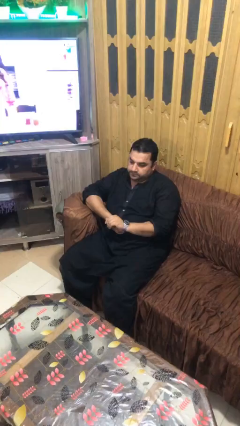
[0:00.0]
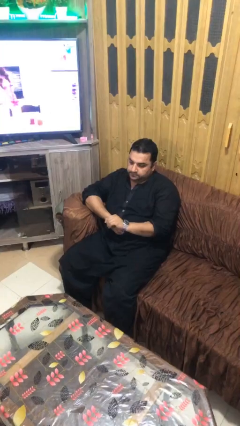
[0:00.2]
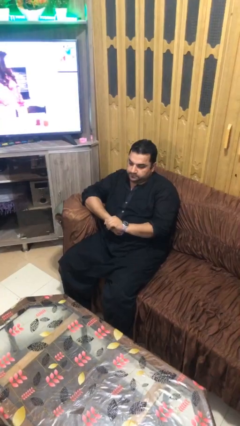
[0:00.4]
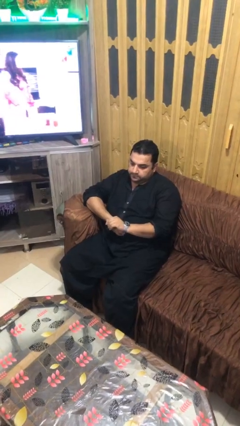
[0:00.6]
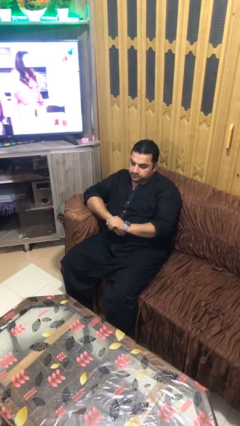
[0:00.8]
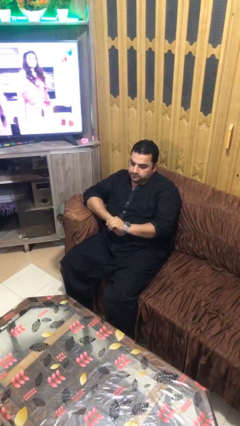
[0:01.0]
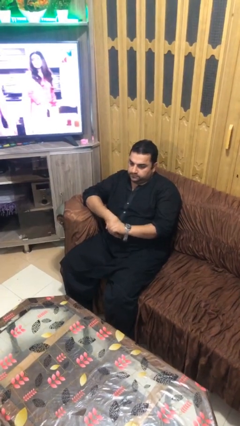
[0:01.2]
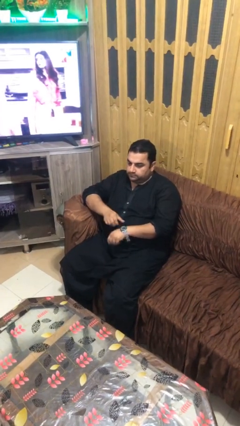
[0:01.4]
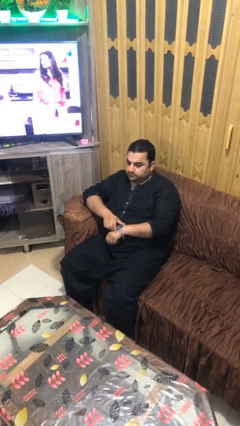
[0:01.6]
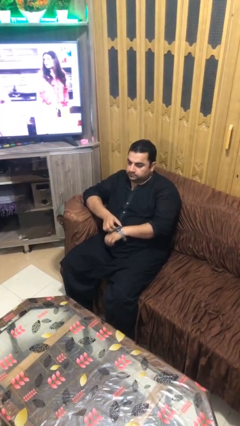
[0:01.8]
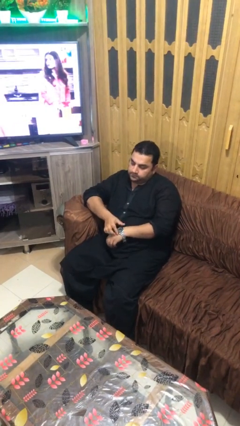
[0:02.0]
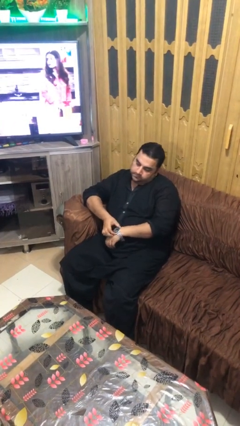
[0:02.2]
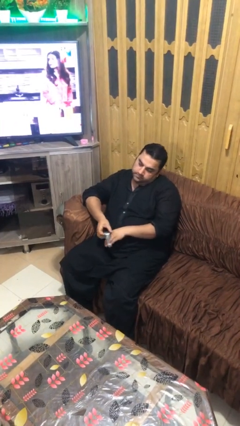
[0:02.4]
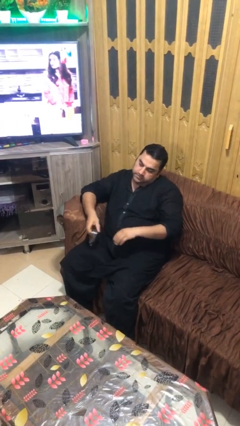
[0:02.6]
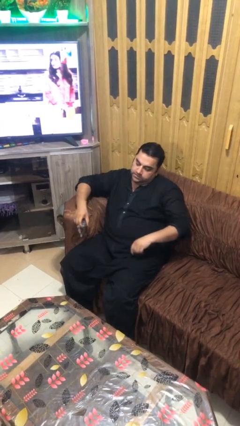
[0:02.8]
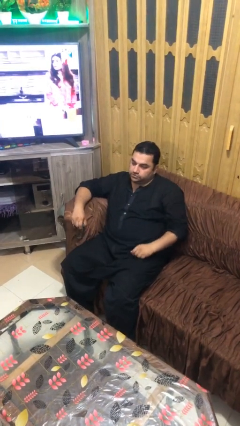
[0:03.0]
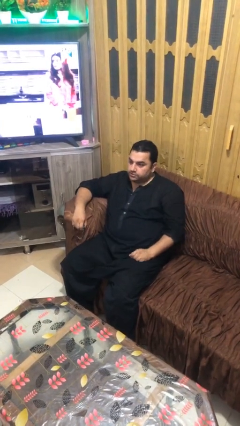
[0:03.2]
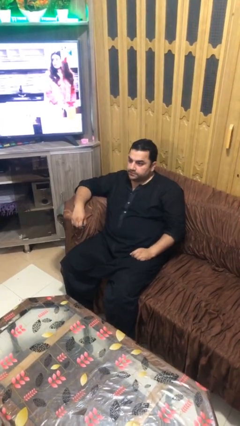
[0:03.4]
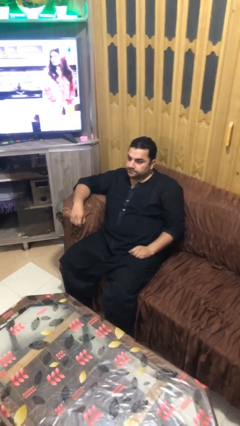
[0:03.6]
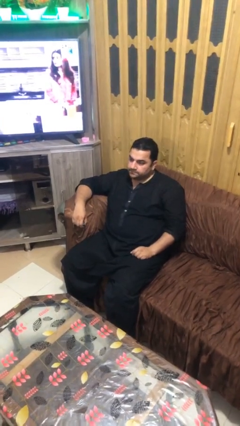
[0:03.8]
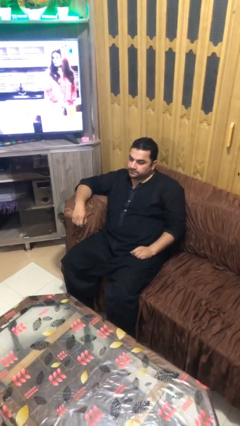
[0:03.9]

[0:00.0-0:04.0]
person takes off wristwatch

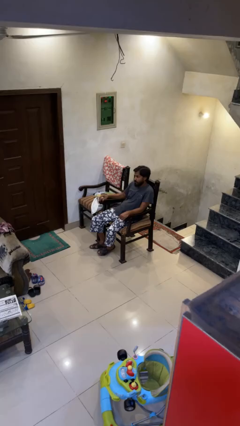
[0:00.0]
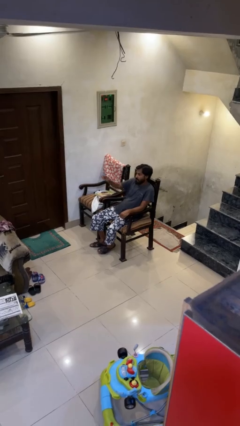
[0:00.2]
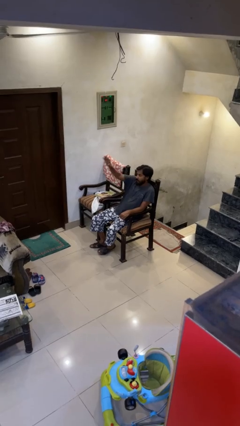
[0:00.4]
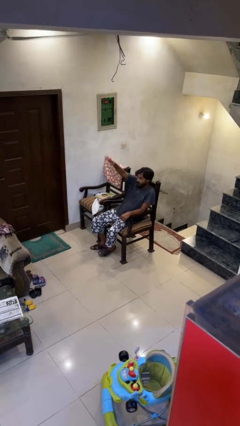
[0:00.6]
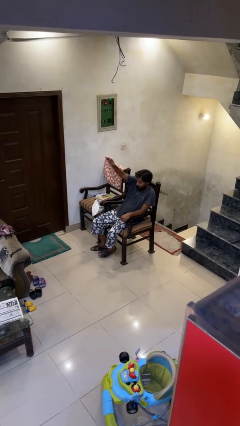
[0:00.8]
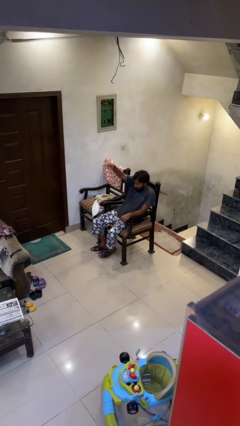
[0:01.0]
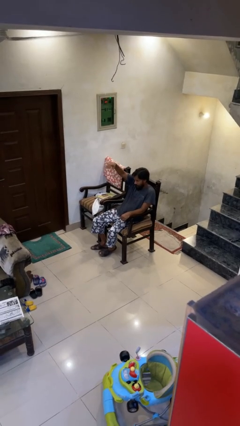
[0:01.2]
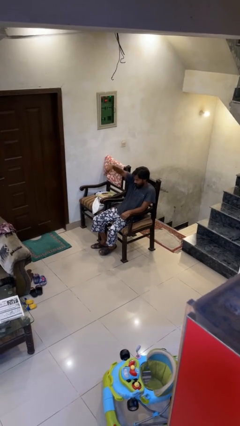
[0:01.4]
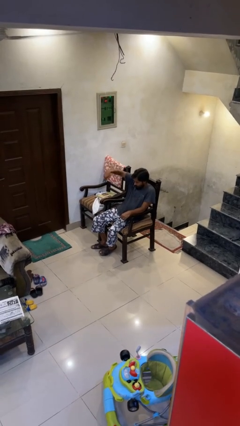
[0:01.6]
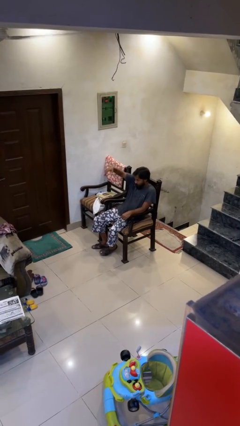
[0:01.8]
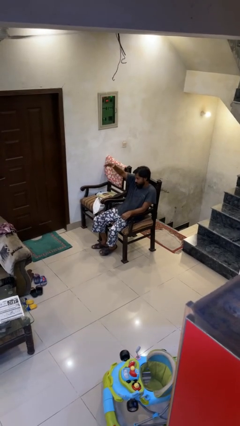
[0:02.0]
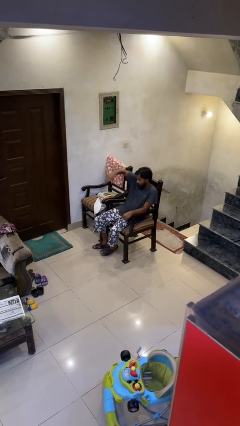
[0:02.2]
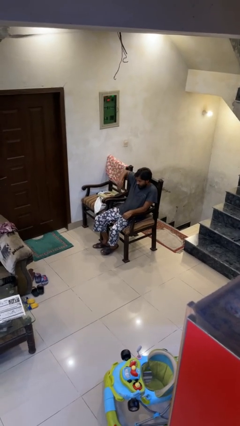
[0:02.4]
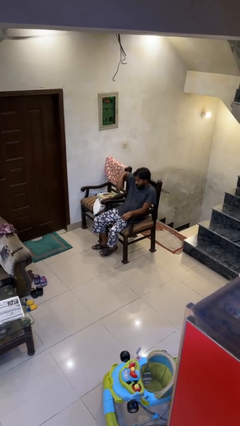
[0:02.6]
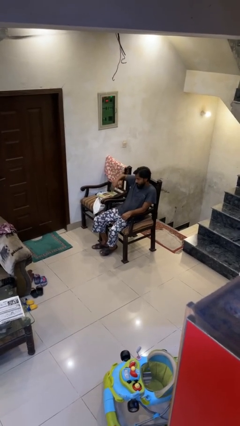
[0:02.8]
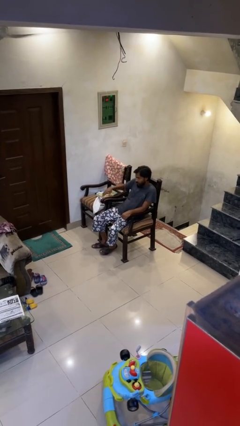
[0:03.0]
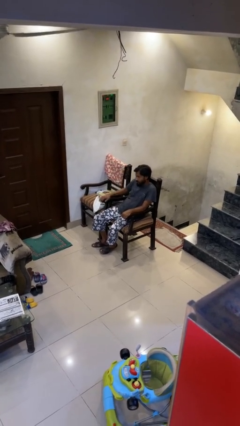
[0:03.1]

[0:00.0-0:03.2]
person gestures come here

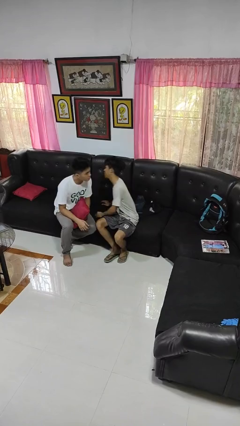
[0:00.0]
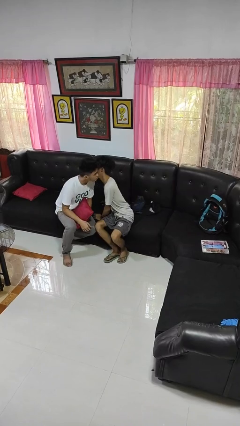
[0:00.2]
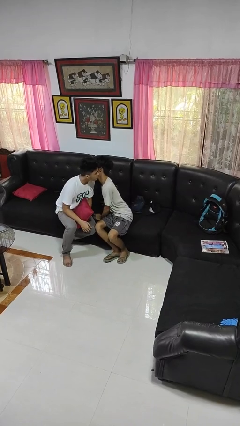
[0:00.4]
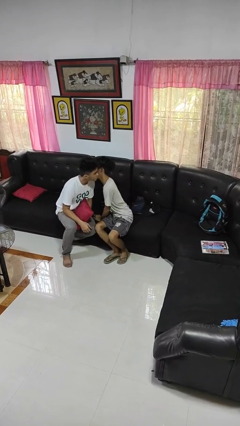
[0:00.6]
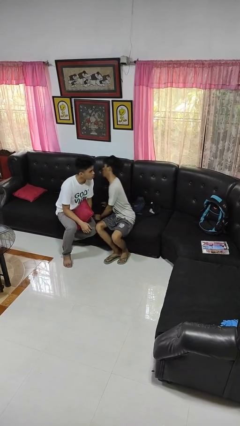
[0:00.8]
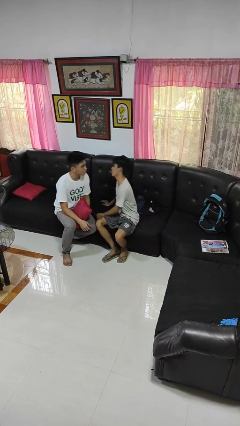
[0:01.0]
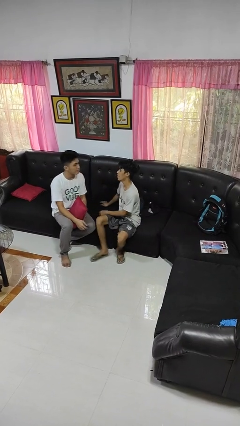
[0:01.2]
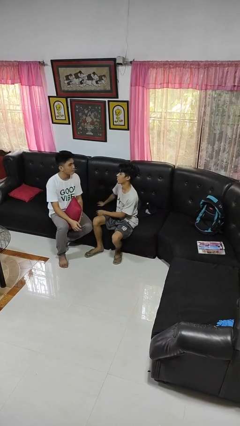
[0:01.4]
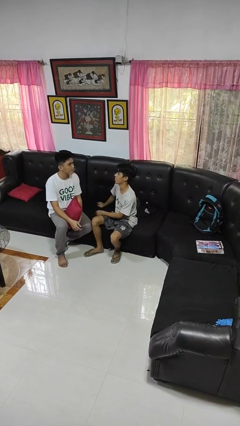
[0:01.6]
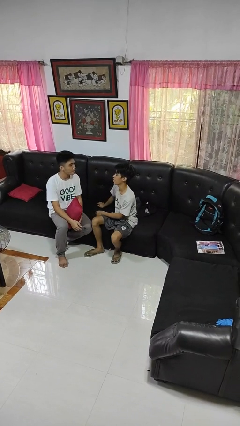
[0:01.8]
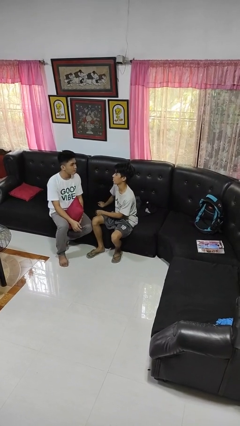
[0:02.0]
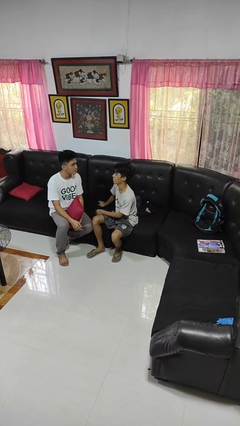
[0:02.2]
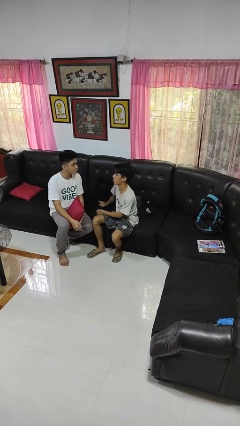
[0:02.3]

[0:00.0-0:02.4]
person kisses cheek of person

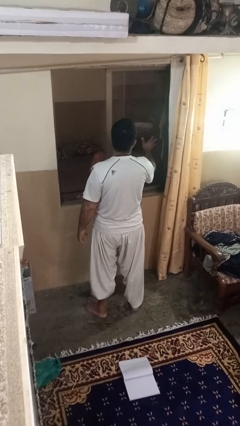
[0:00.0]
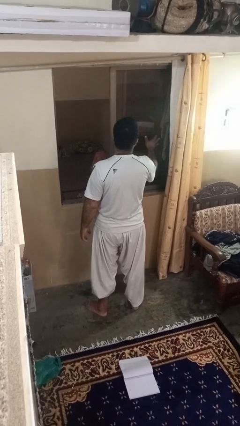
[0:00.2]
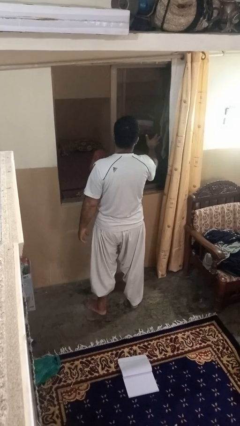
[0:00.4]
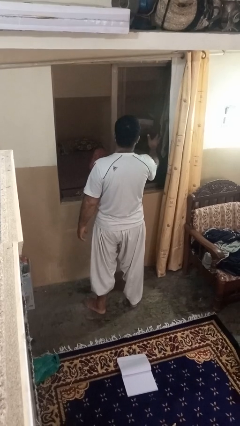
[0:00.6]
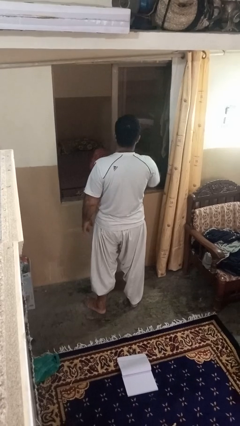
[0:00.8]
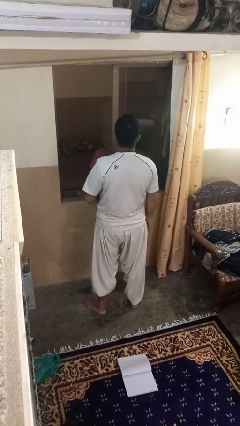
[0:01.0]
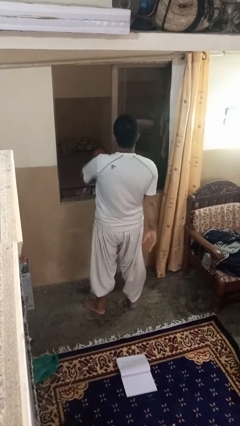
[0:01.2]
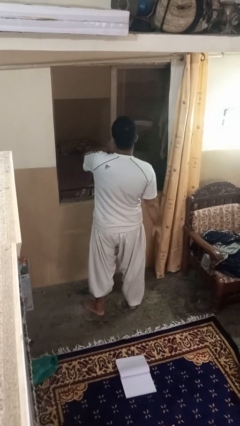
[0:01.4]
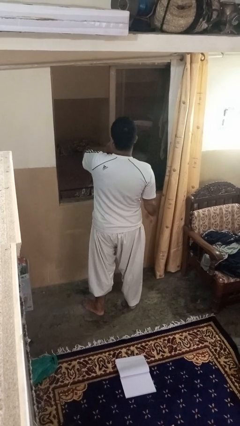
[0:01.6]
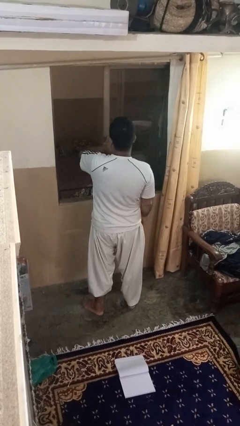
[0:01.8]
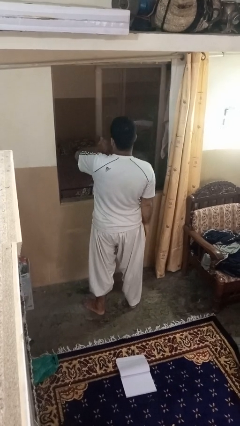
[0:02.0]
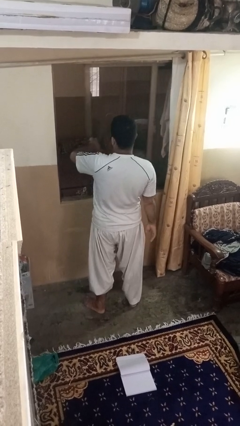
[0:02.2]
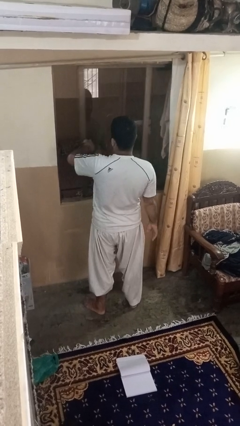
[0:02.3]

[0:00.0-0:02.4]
person closes home window

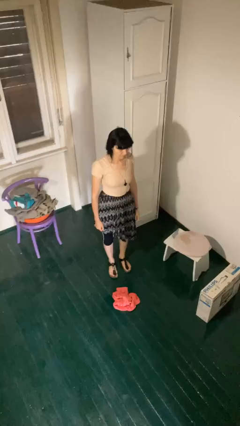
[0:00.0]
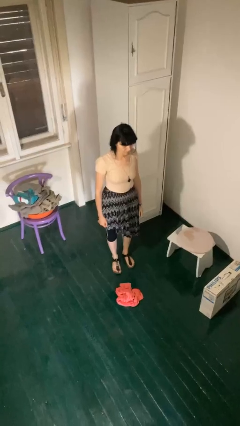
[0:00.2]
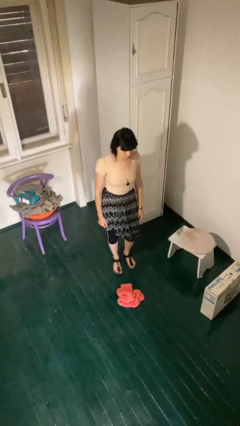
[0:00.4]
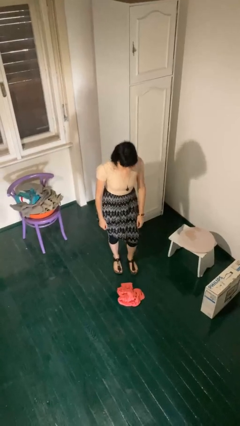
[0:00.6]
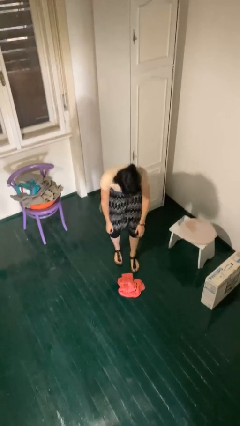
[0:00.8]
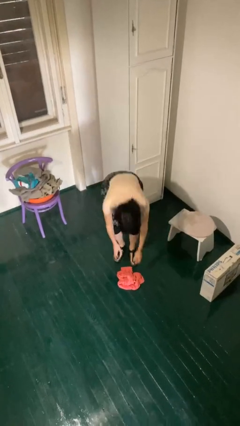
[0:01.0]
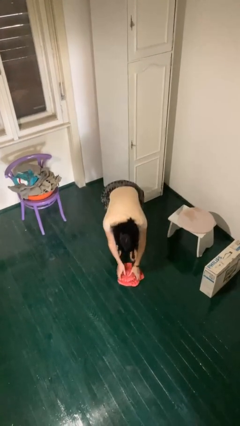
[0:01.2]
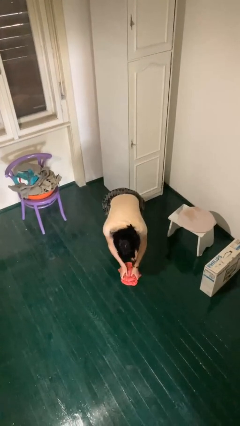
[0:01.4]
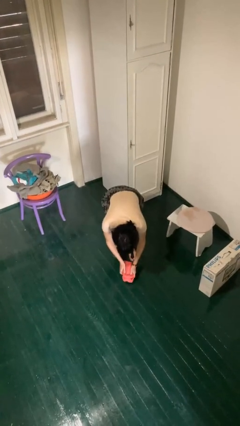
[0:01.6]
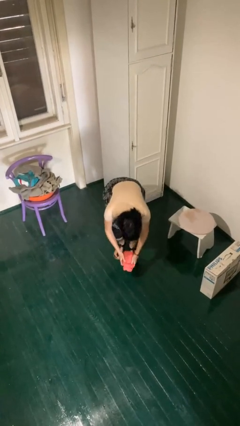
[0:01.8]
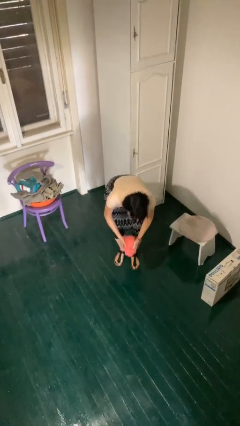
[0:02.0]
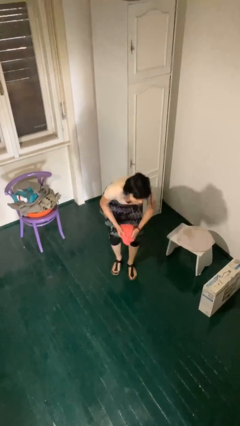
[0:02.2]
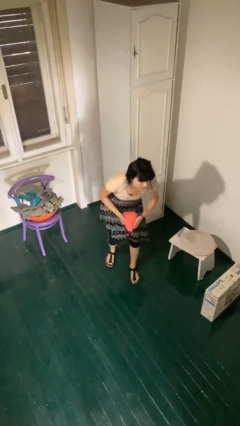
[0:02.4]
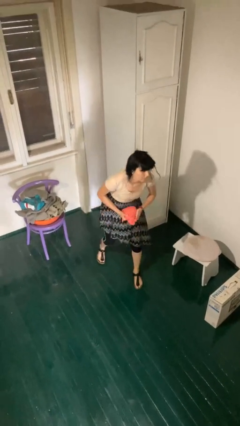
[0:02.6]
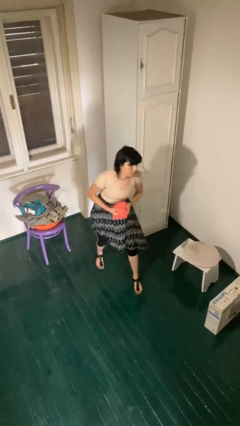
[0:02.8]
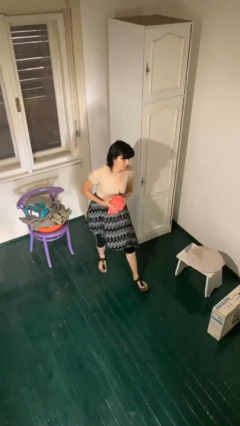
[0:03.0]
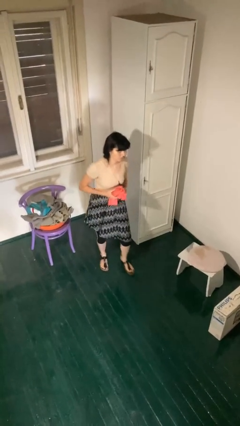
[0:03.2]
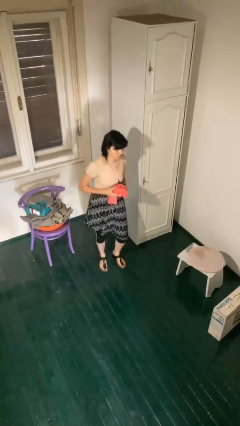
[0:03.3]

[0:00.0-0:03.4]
person picks up object from floor

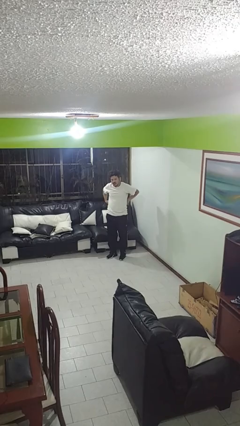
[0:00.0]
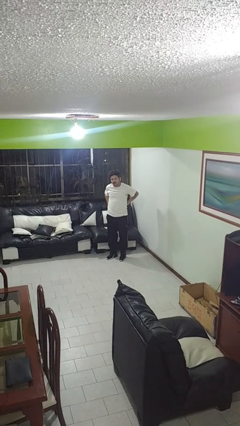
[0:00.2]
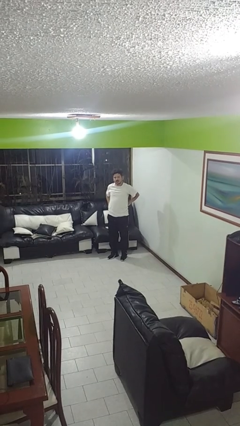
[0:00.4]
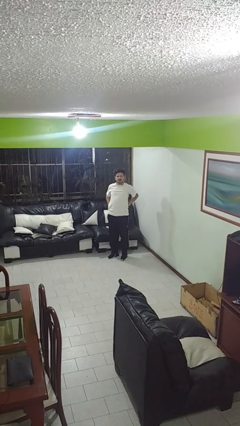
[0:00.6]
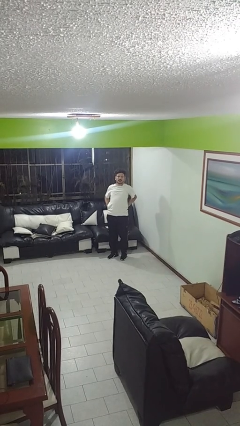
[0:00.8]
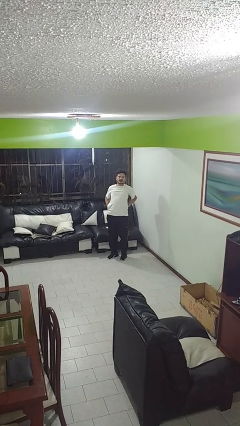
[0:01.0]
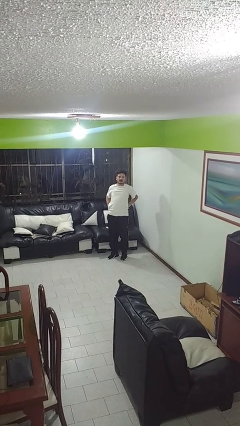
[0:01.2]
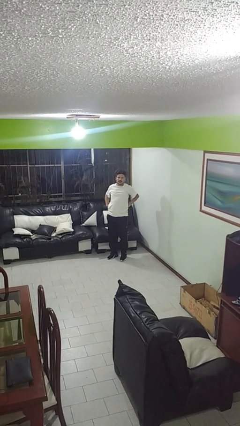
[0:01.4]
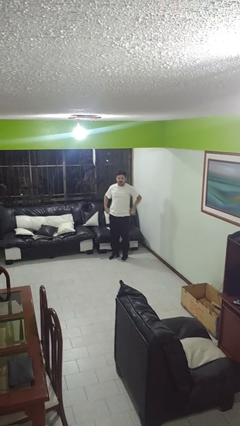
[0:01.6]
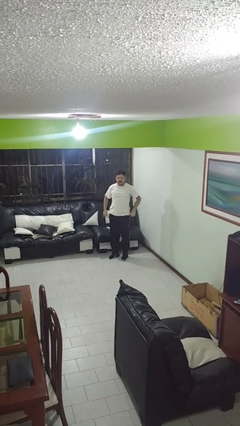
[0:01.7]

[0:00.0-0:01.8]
person stretches back
